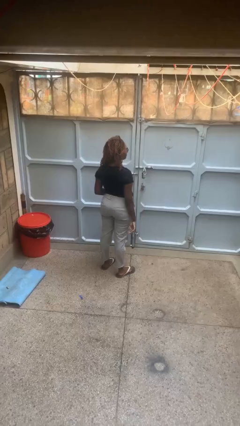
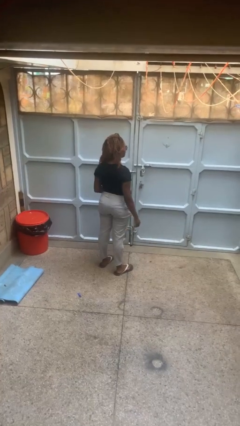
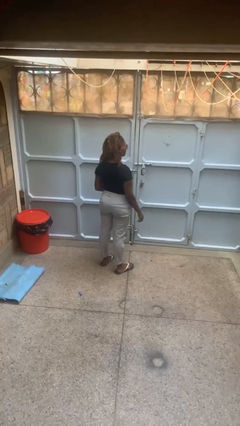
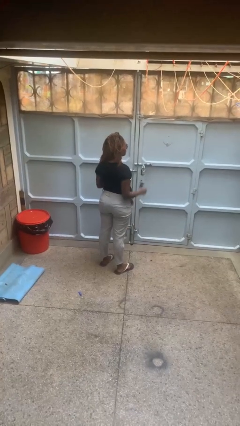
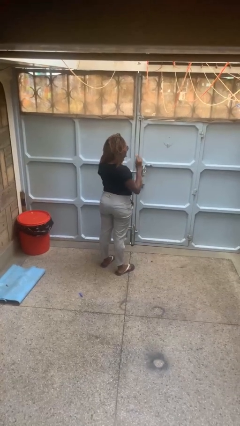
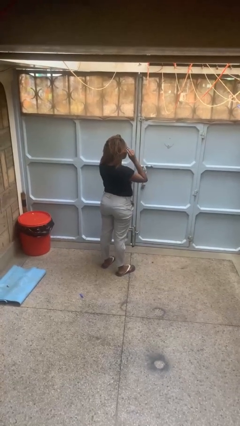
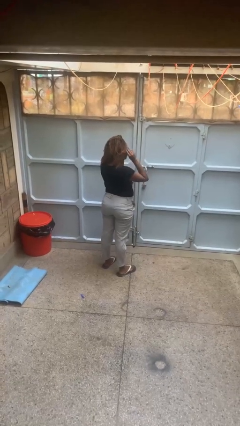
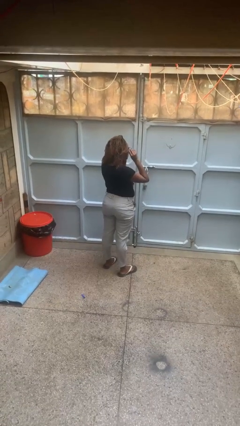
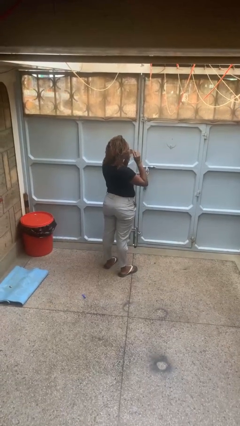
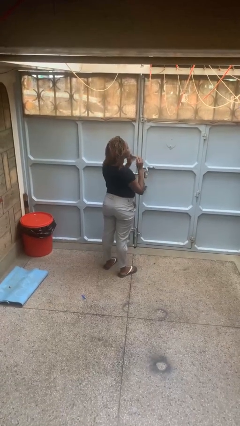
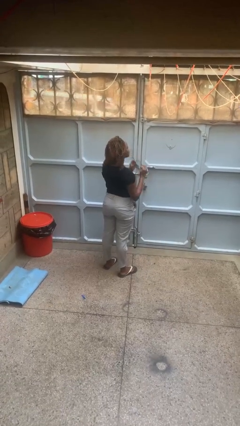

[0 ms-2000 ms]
person takes off glasses

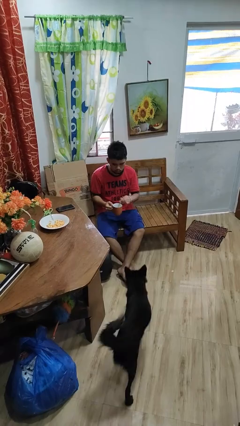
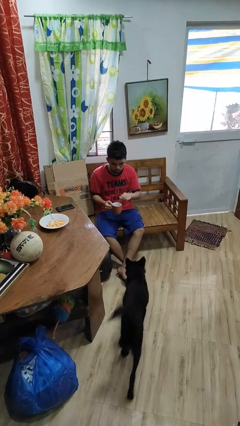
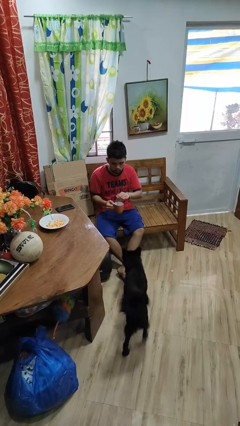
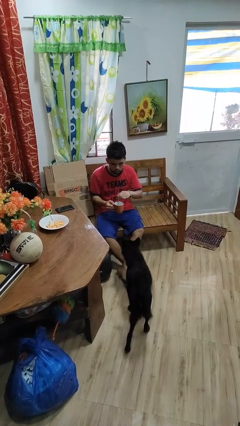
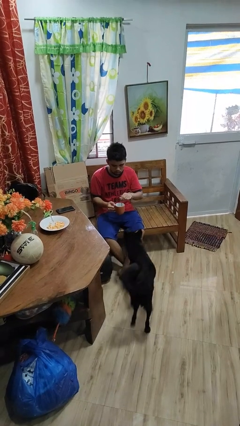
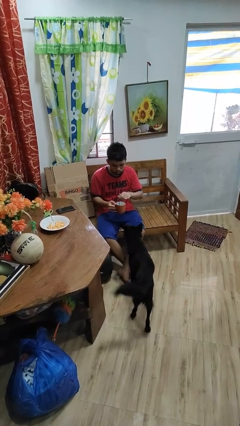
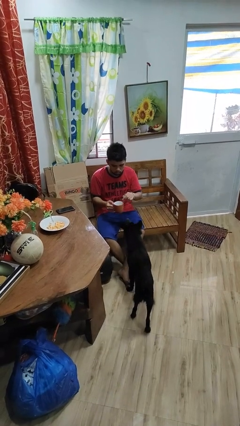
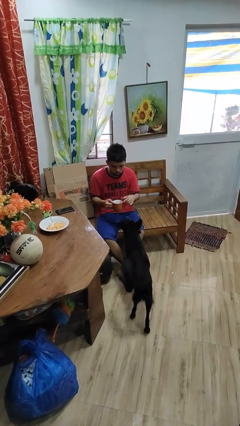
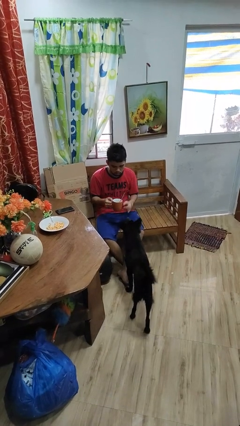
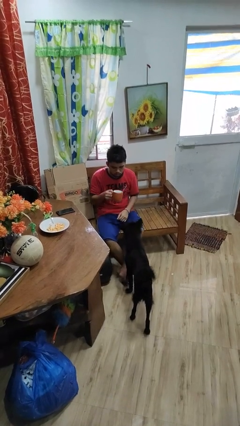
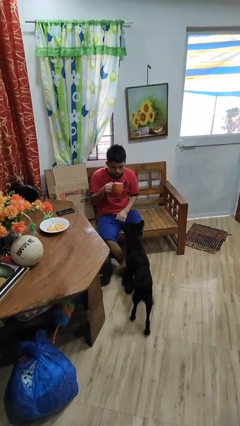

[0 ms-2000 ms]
person stirs mug

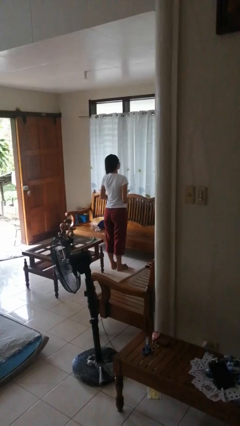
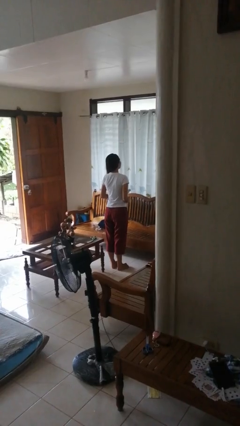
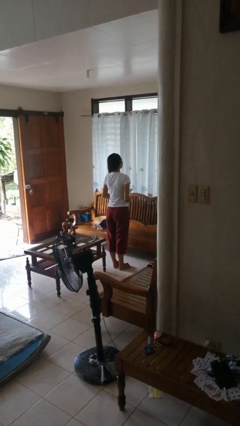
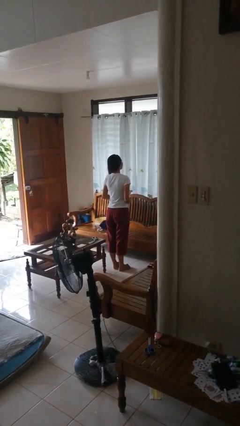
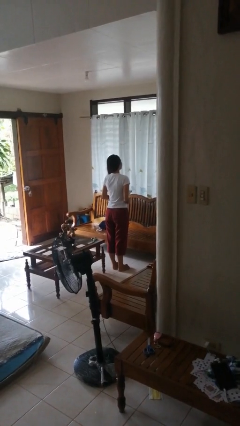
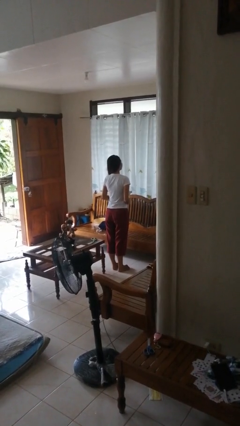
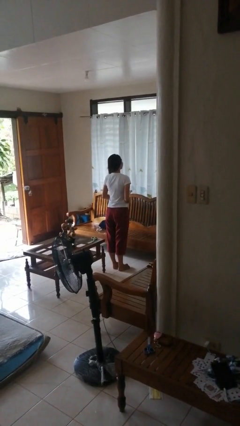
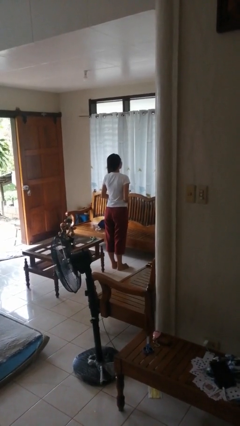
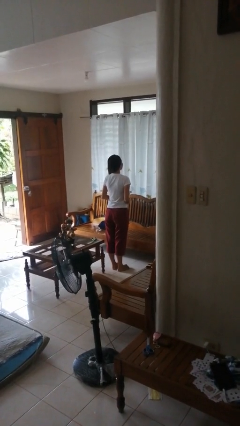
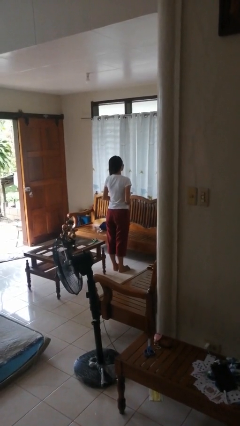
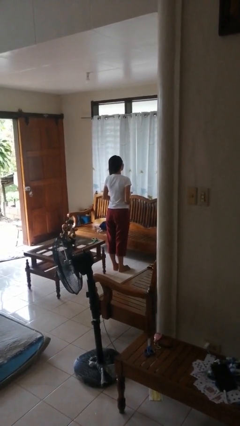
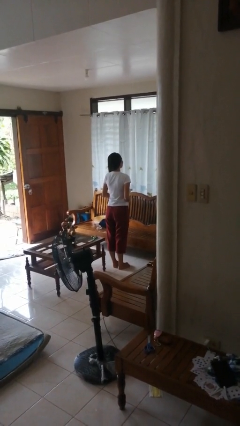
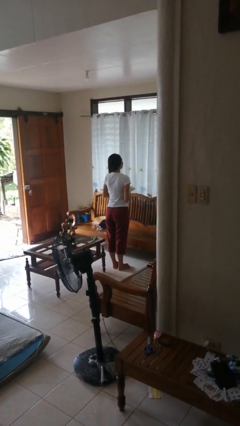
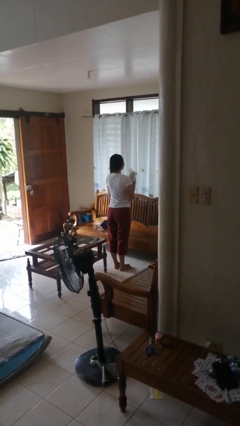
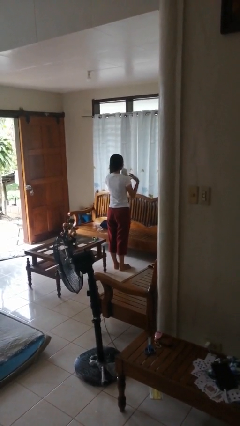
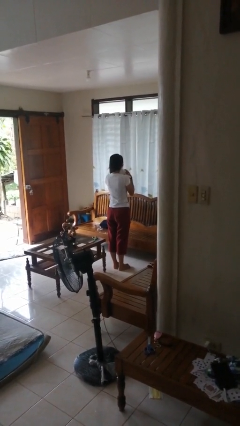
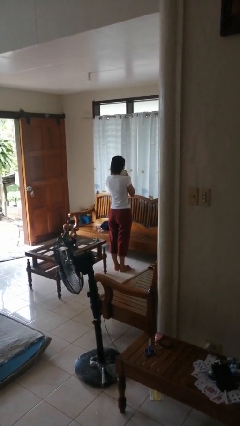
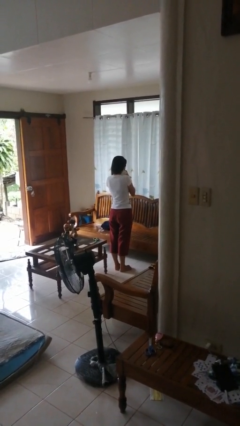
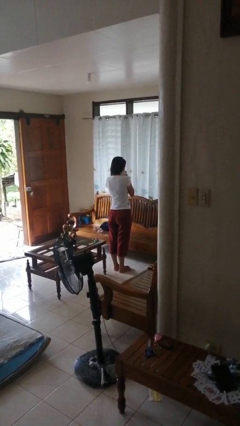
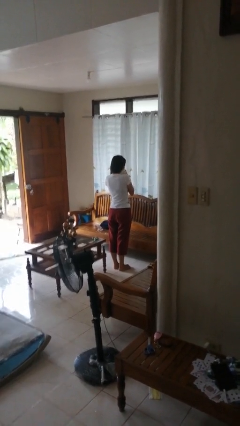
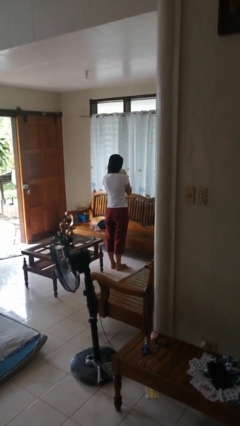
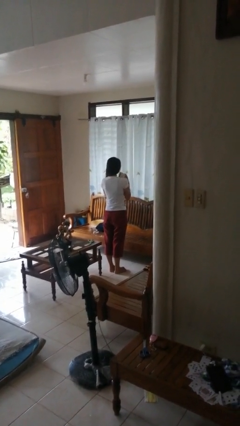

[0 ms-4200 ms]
person hugs stuffed animal

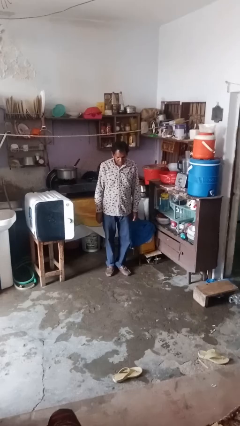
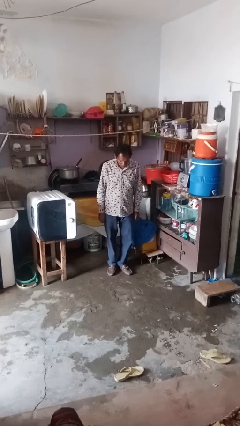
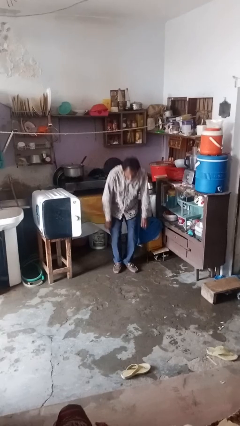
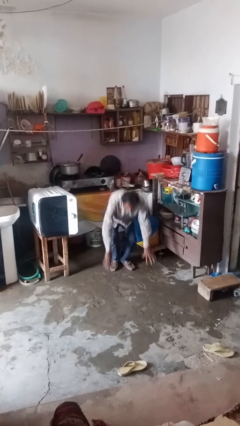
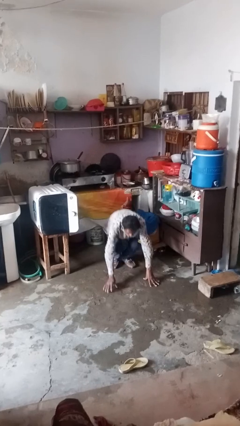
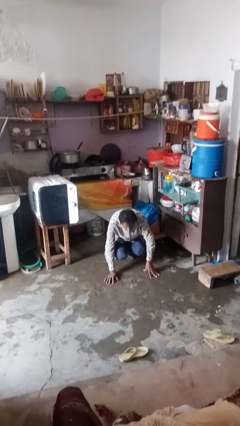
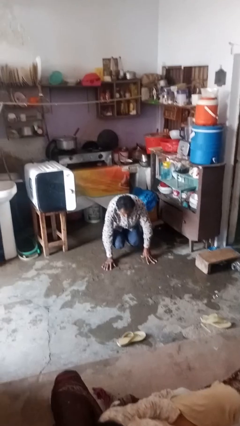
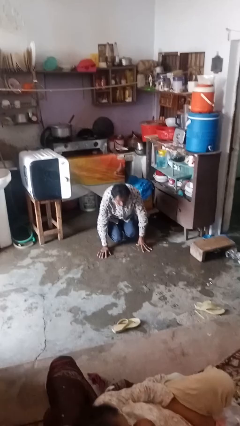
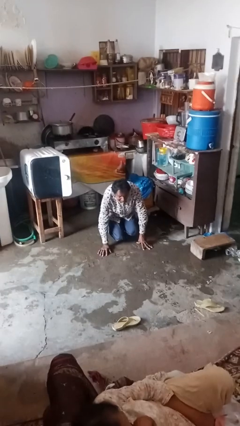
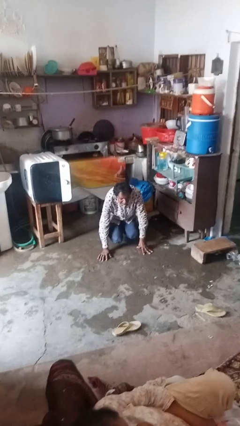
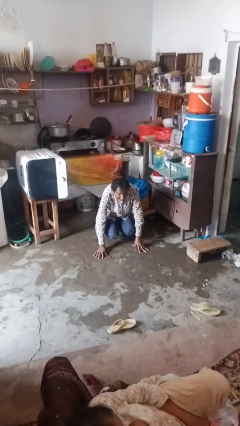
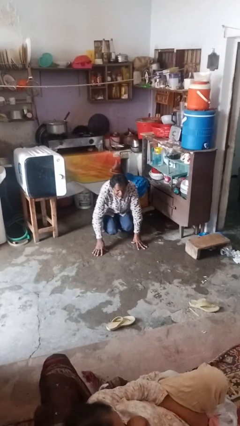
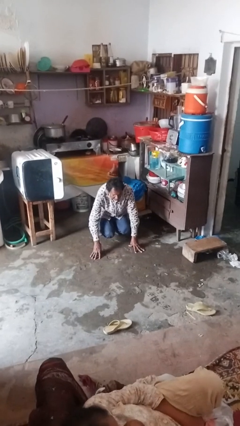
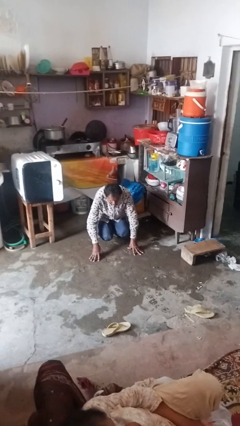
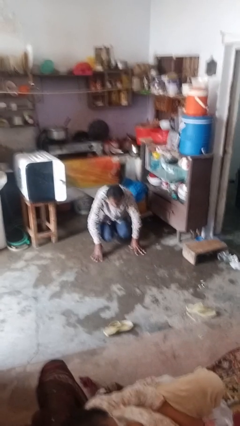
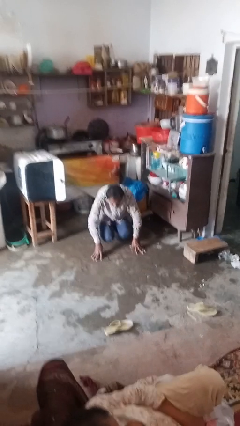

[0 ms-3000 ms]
person falls while standing

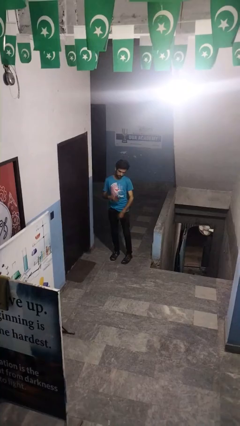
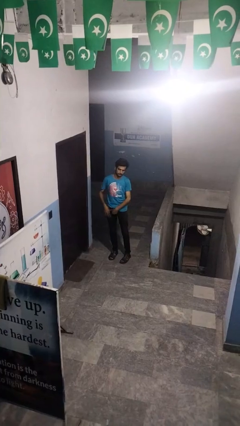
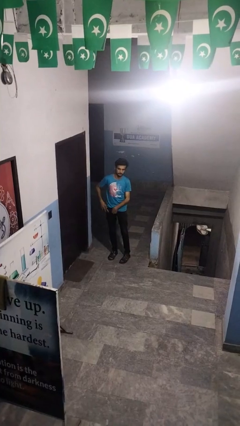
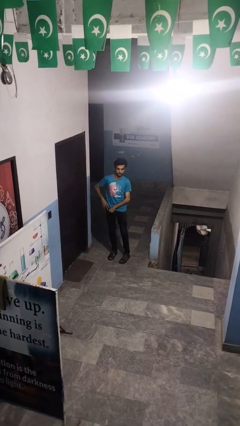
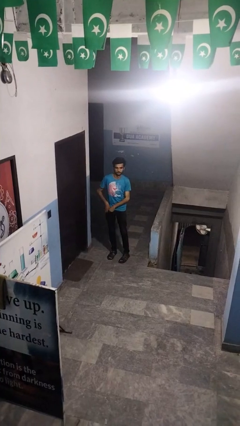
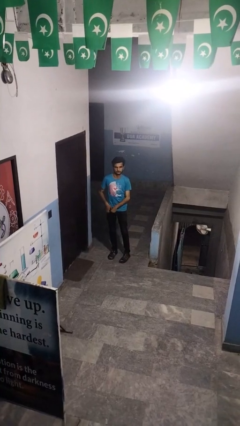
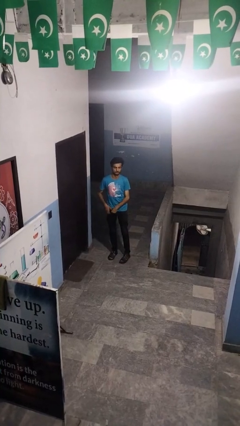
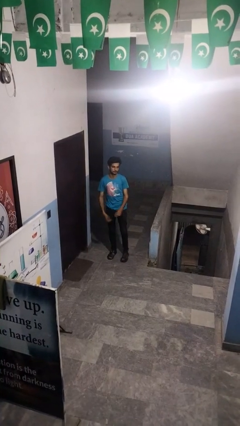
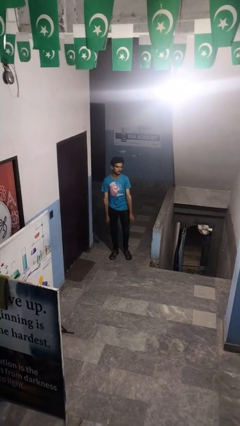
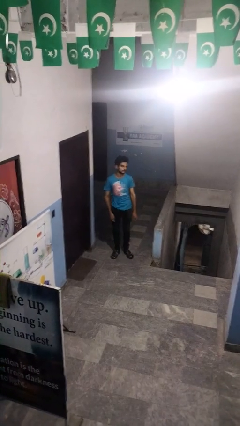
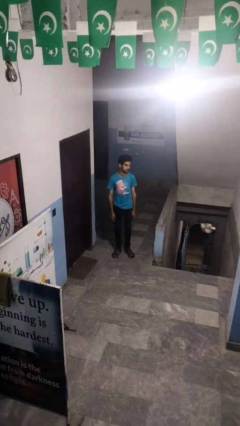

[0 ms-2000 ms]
person puts phone into pocket

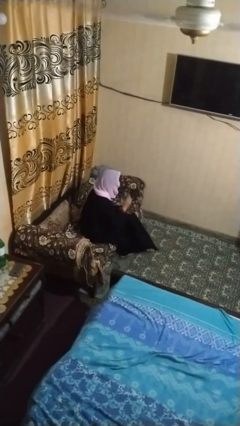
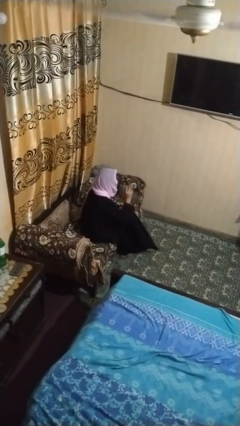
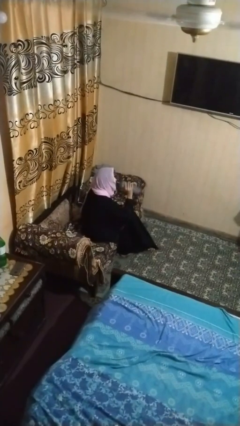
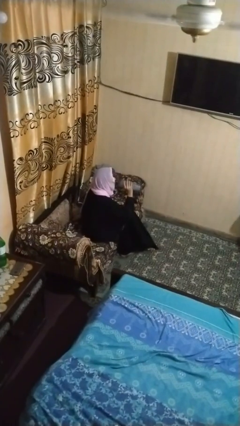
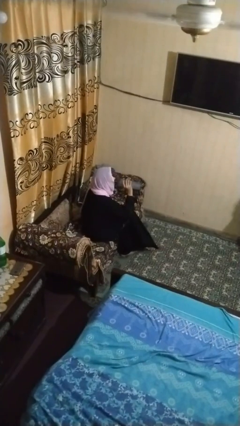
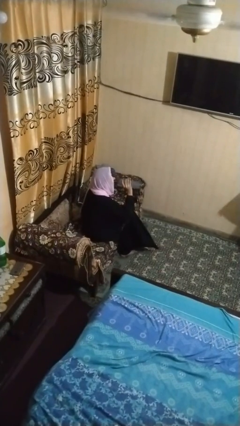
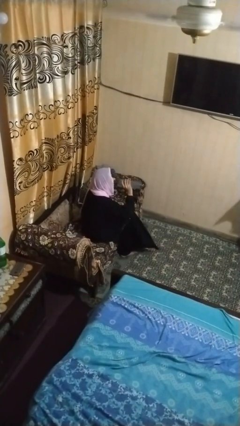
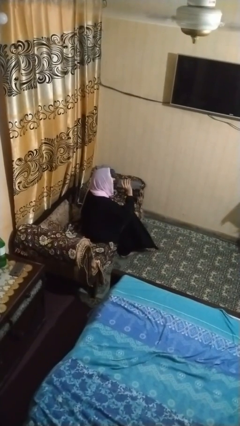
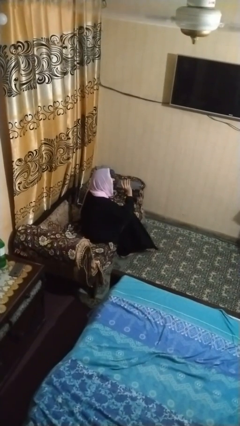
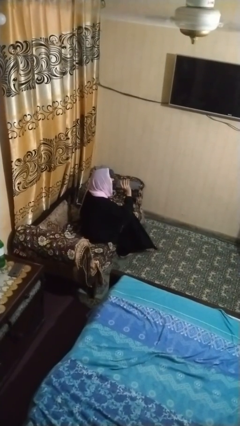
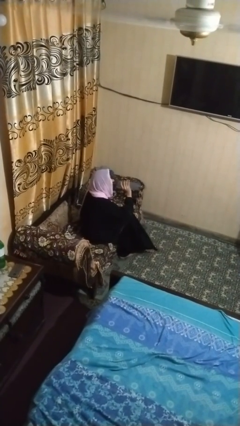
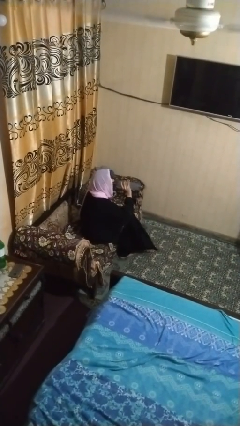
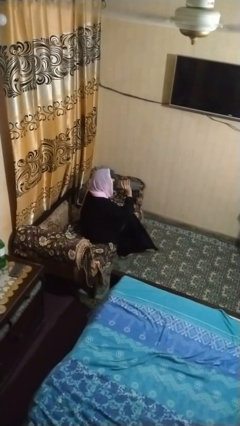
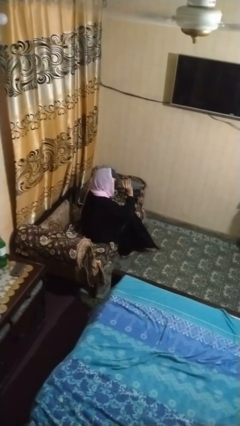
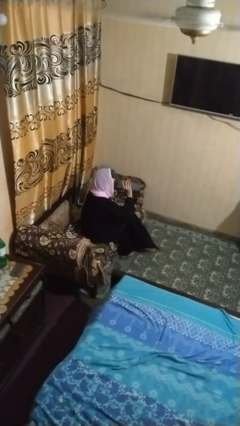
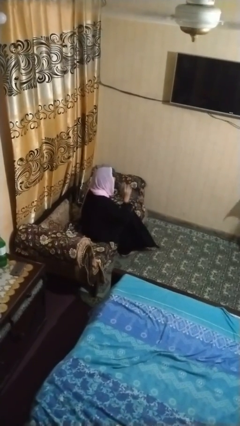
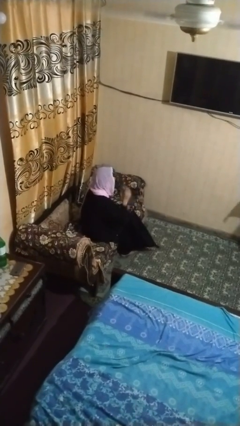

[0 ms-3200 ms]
person drinks from bottle

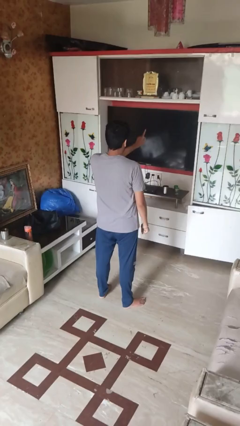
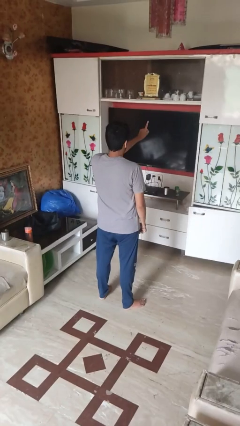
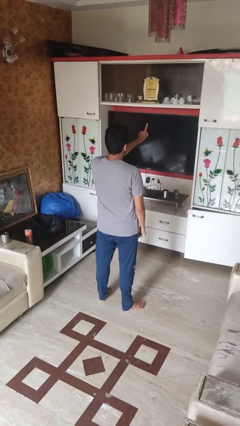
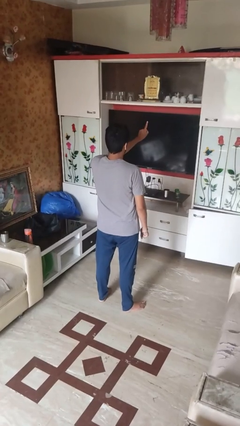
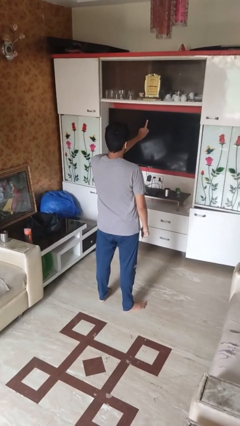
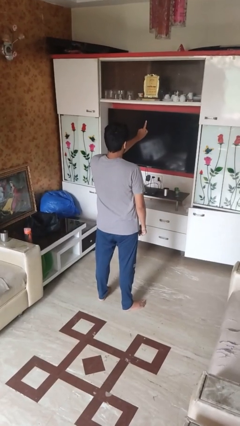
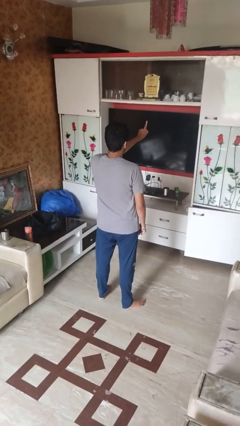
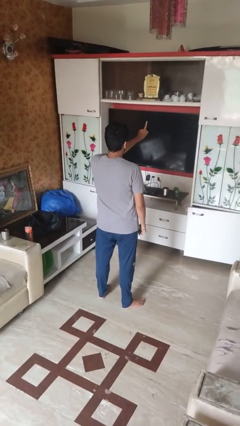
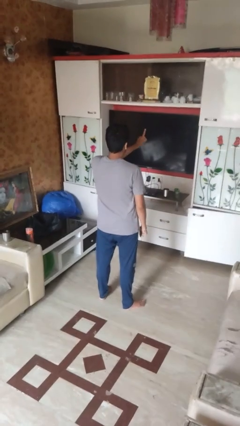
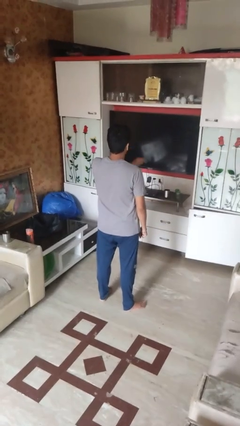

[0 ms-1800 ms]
person gestures number one
